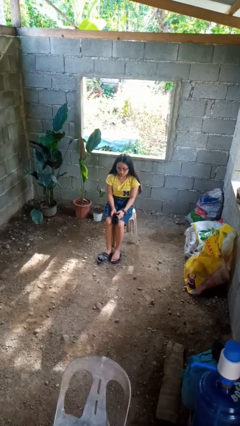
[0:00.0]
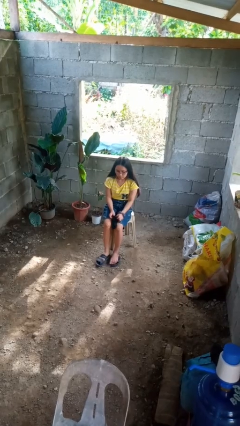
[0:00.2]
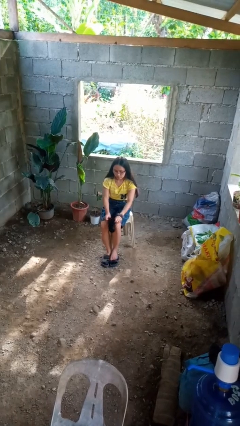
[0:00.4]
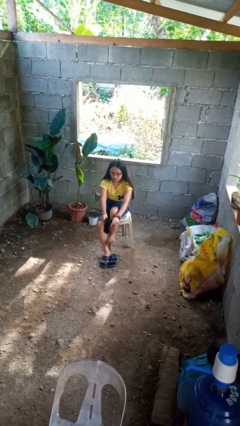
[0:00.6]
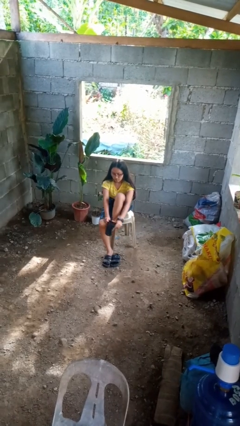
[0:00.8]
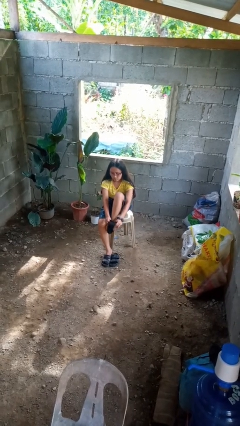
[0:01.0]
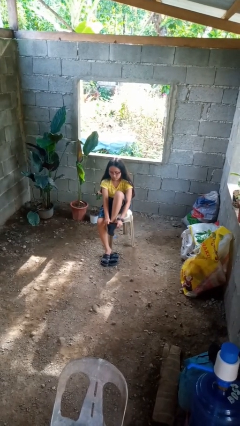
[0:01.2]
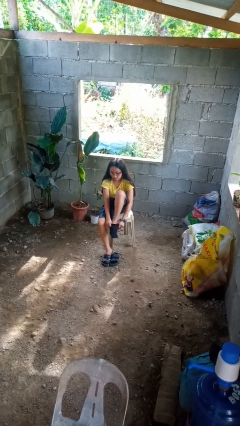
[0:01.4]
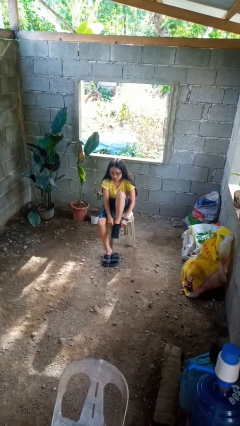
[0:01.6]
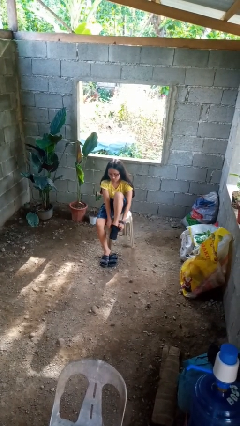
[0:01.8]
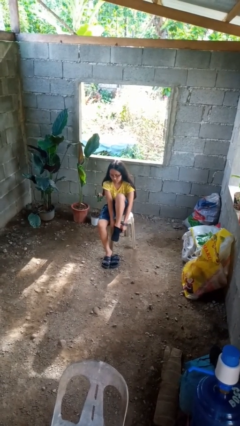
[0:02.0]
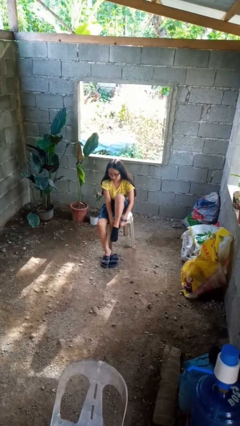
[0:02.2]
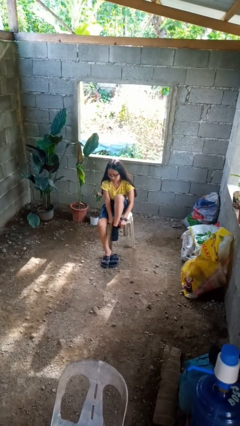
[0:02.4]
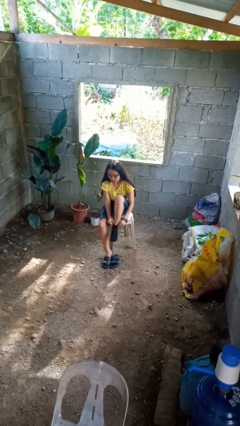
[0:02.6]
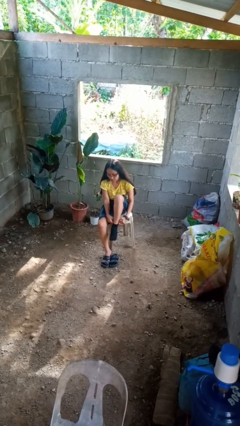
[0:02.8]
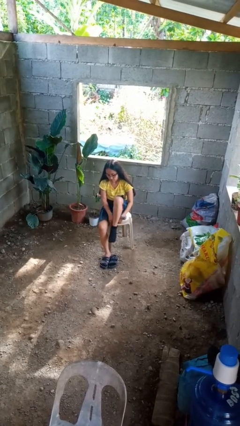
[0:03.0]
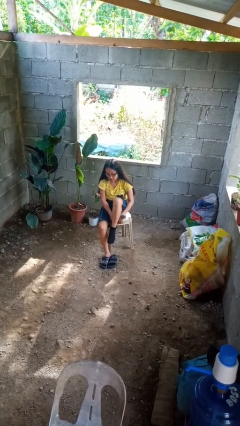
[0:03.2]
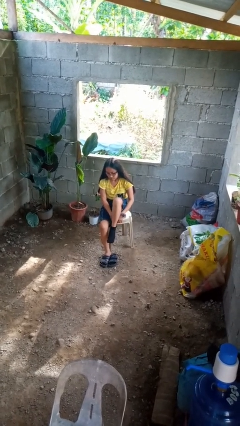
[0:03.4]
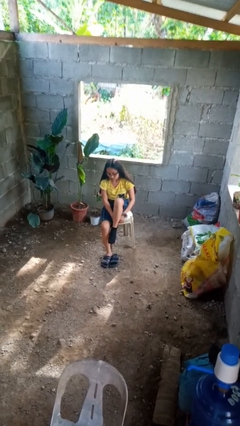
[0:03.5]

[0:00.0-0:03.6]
person puts on socks

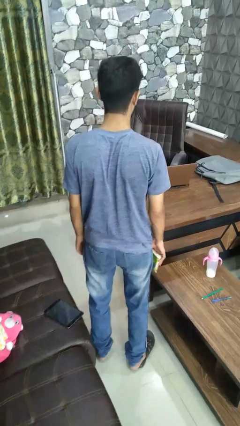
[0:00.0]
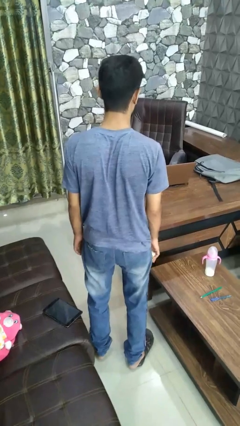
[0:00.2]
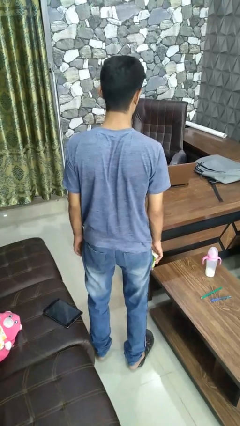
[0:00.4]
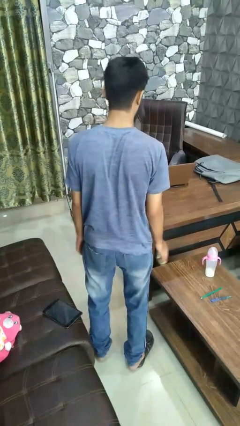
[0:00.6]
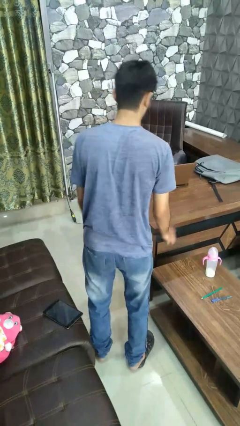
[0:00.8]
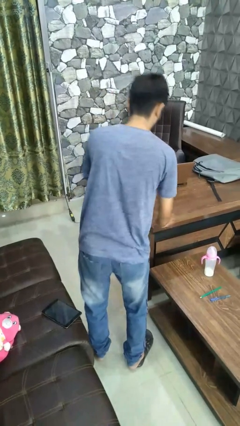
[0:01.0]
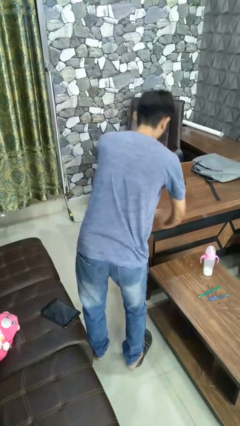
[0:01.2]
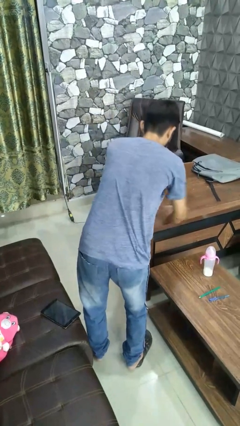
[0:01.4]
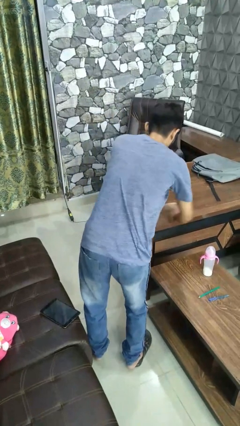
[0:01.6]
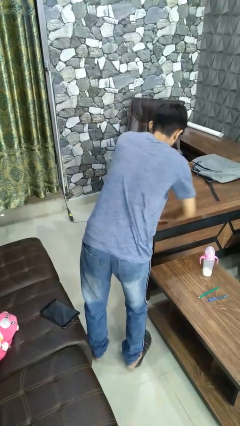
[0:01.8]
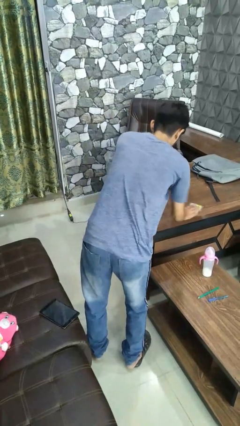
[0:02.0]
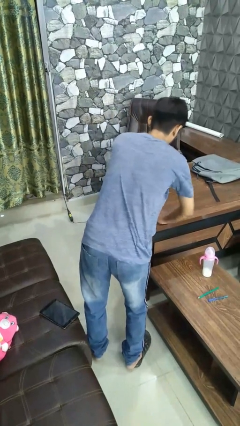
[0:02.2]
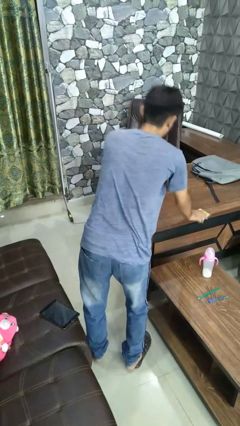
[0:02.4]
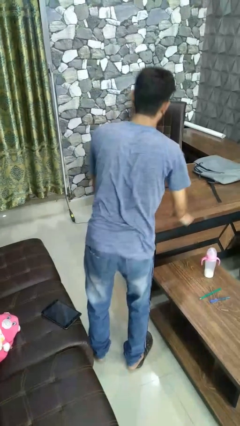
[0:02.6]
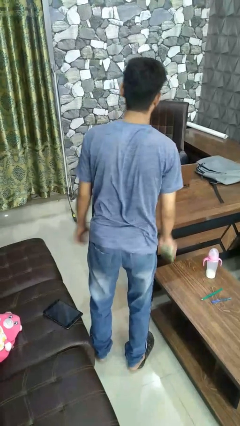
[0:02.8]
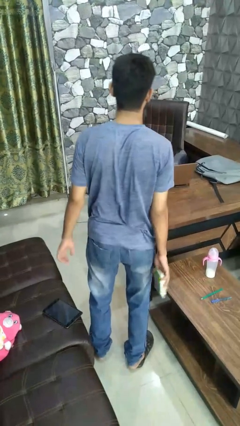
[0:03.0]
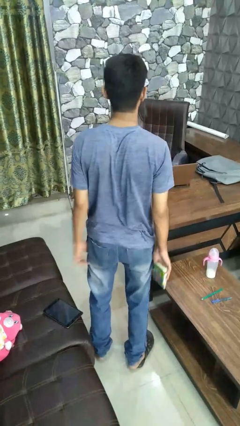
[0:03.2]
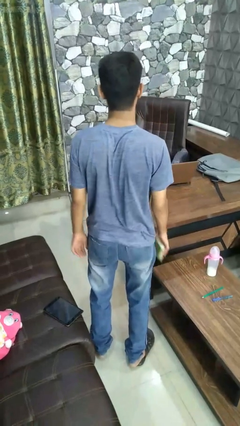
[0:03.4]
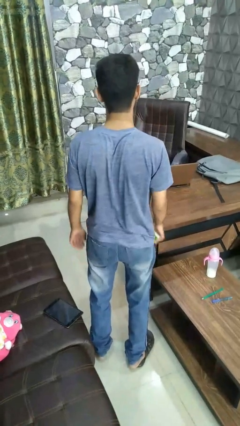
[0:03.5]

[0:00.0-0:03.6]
person dusts furniture

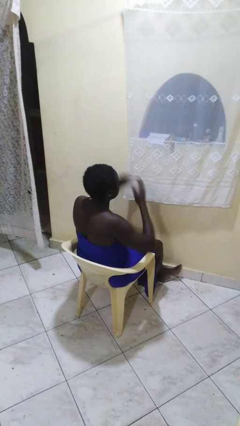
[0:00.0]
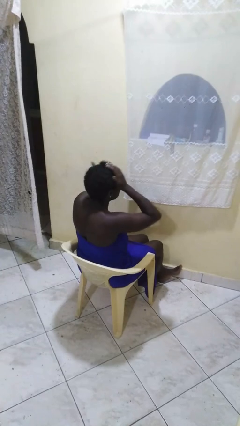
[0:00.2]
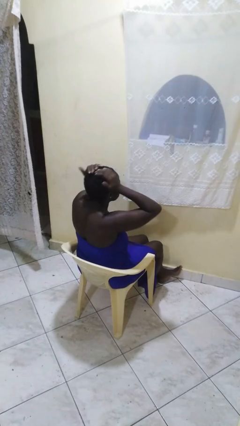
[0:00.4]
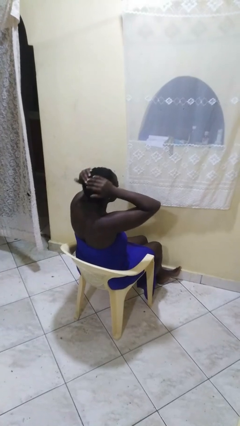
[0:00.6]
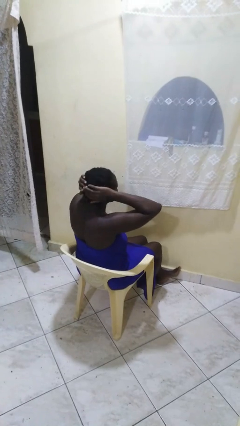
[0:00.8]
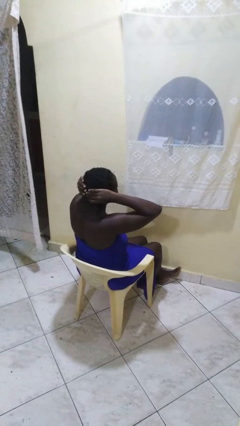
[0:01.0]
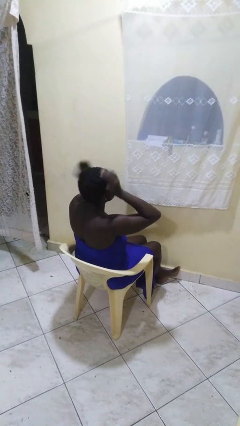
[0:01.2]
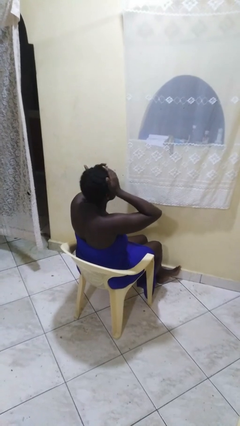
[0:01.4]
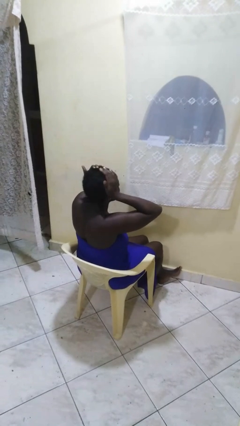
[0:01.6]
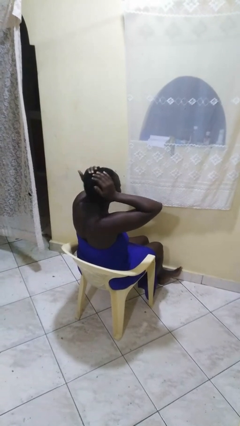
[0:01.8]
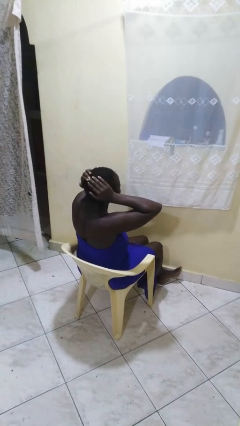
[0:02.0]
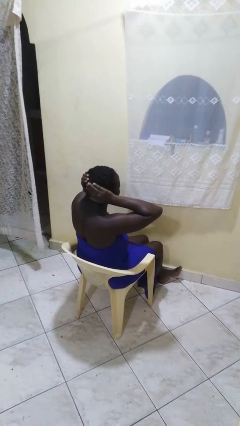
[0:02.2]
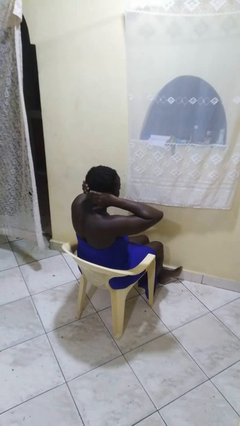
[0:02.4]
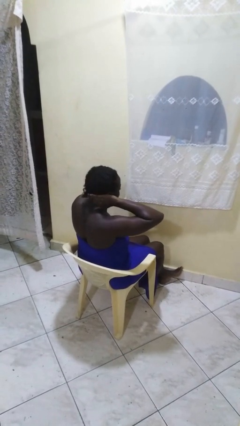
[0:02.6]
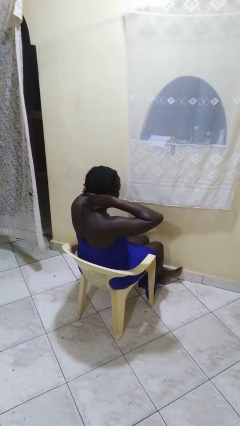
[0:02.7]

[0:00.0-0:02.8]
person strokes hair

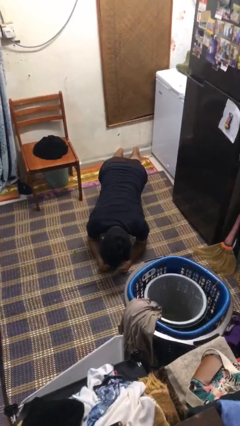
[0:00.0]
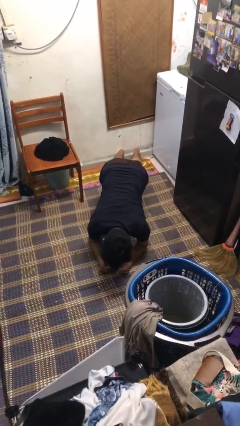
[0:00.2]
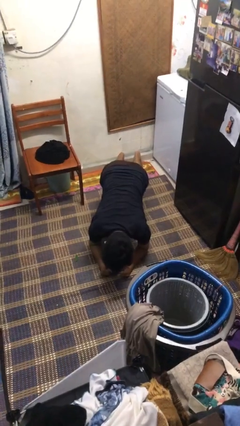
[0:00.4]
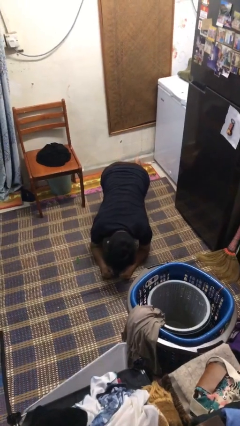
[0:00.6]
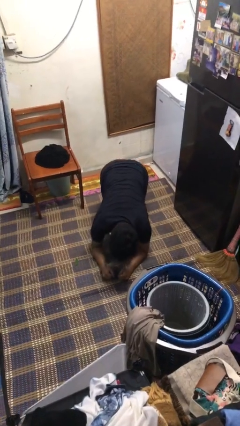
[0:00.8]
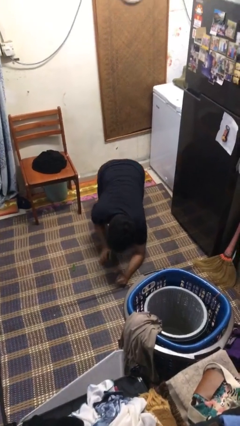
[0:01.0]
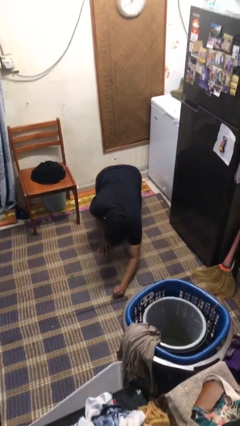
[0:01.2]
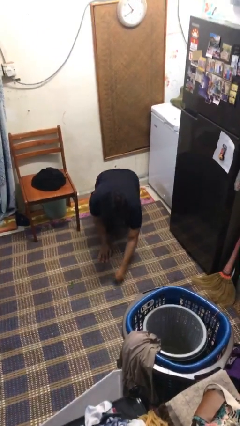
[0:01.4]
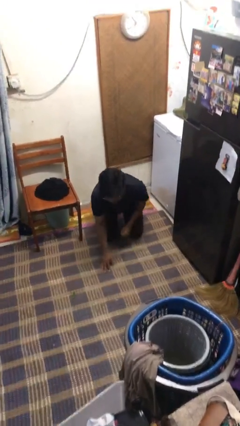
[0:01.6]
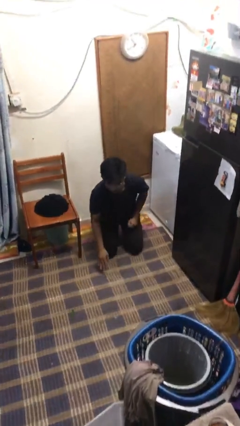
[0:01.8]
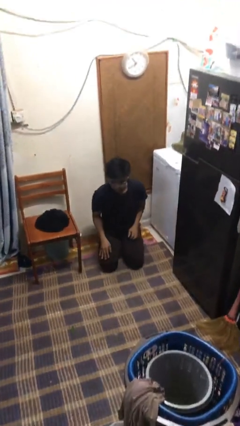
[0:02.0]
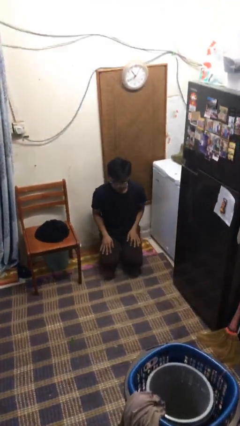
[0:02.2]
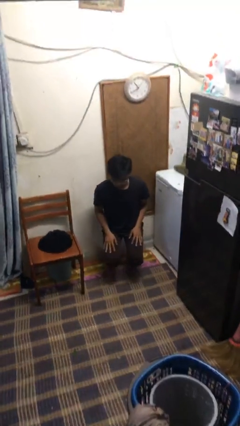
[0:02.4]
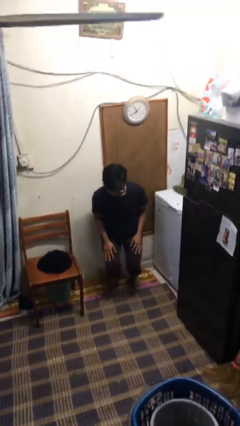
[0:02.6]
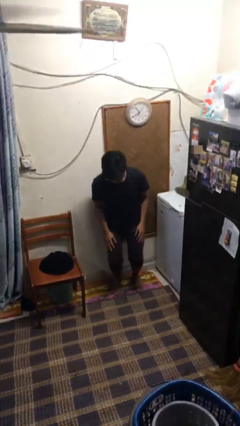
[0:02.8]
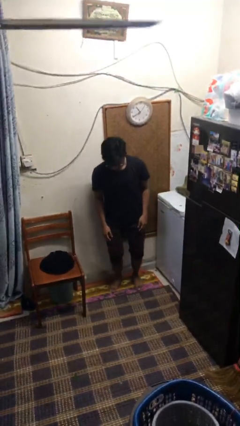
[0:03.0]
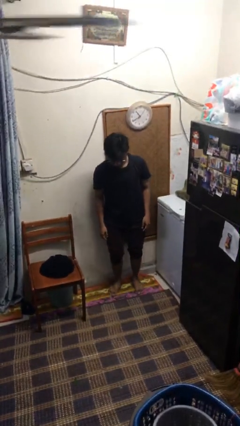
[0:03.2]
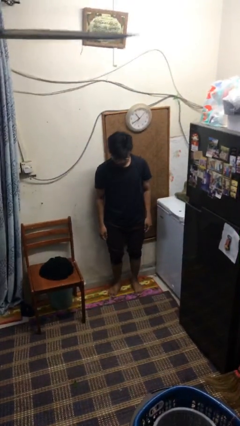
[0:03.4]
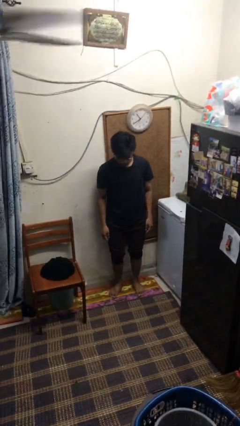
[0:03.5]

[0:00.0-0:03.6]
person stands up from floor

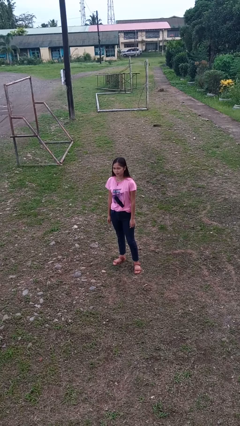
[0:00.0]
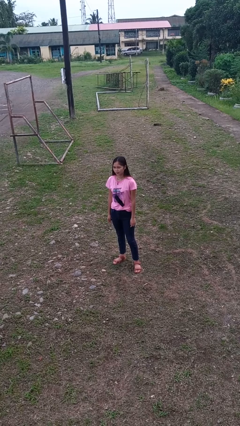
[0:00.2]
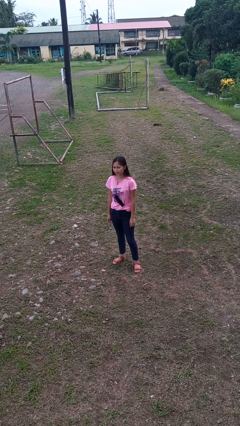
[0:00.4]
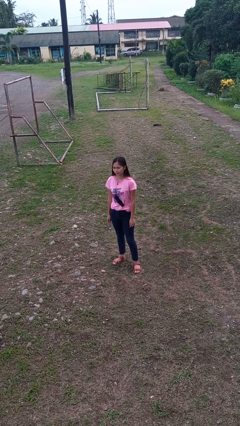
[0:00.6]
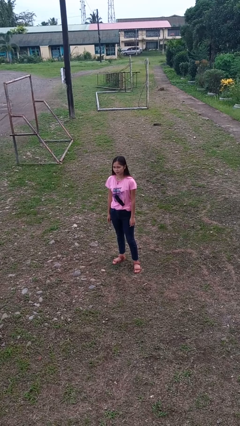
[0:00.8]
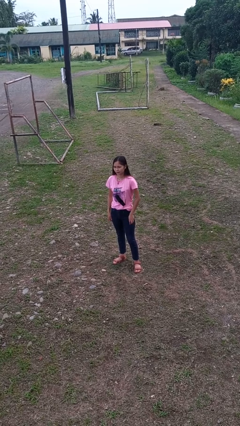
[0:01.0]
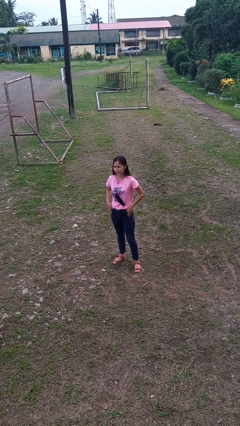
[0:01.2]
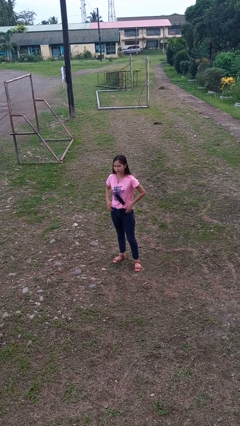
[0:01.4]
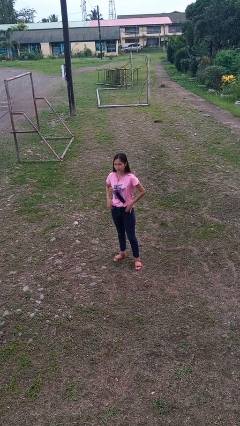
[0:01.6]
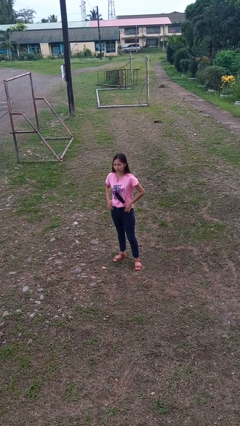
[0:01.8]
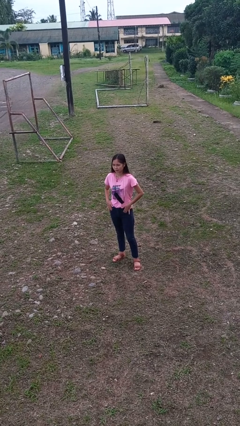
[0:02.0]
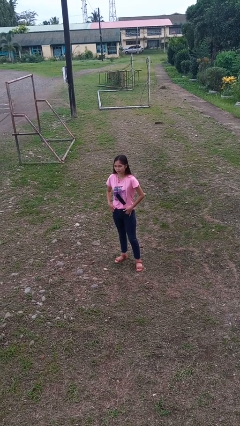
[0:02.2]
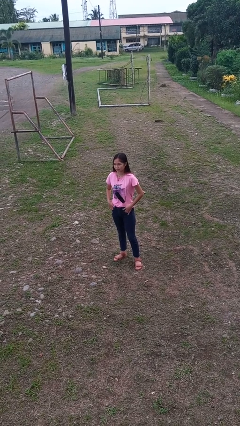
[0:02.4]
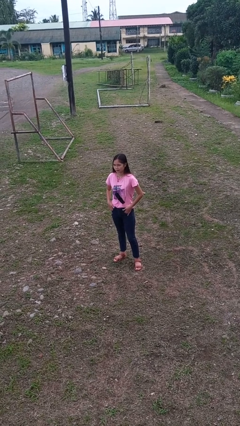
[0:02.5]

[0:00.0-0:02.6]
person puts hands in back pockets

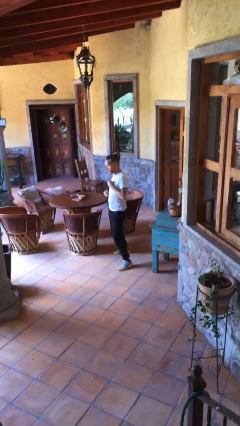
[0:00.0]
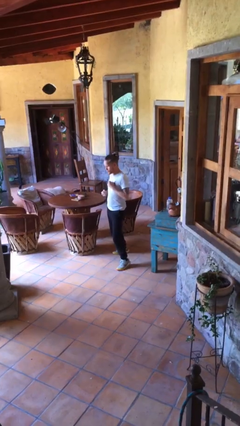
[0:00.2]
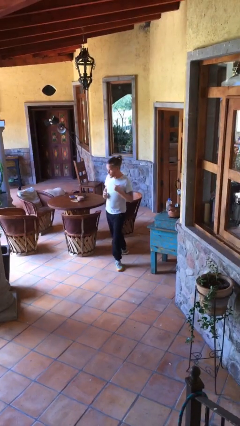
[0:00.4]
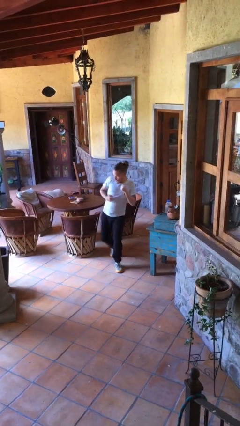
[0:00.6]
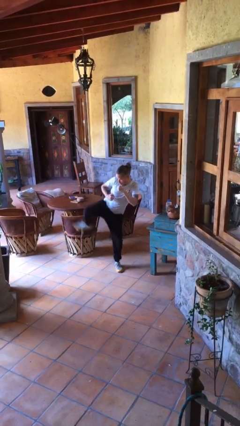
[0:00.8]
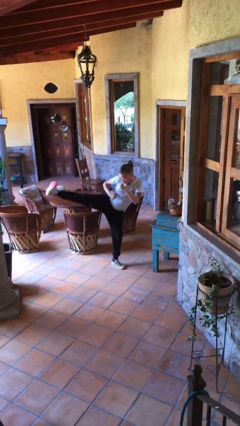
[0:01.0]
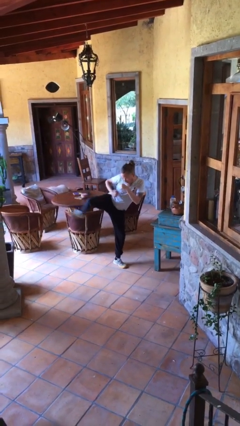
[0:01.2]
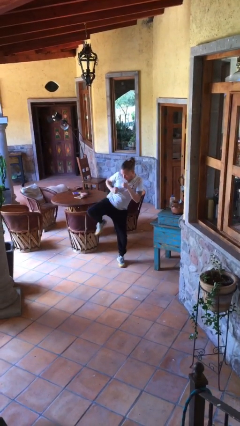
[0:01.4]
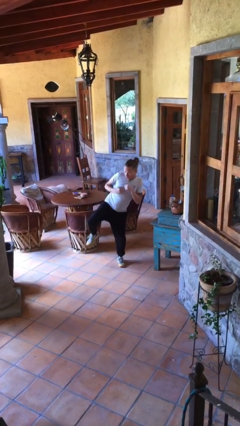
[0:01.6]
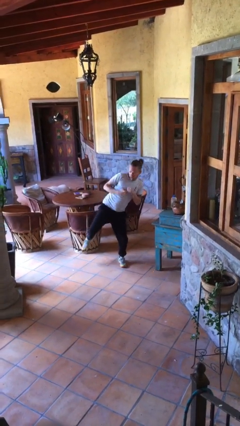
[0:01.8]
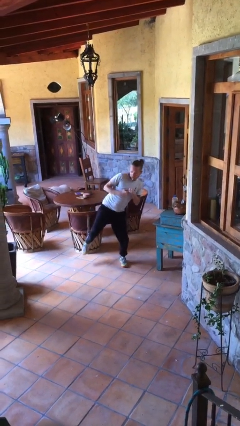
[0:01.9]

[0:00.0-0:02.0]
person karate kicks
